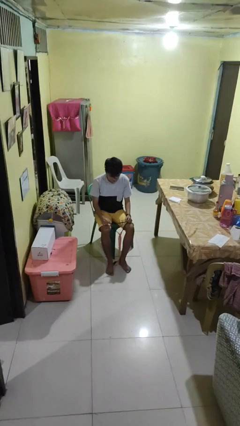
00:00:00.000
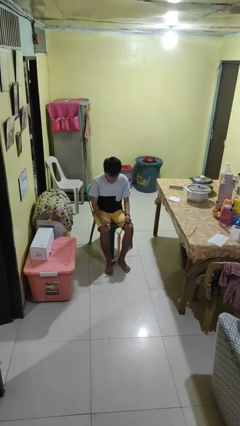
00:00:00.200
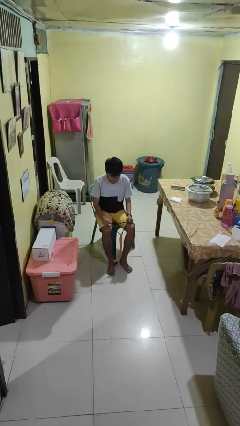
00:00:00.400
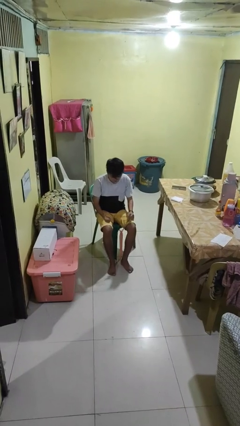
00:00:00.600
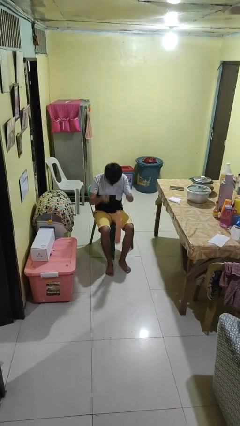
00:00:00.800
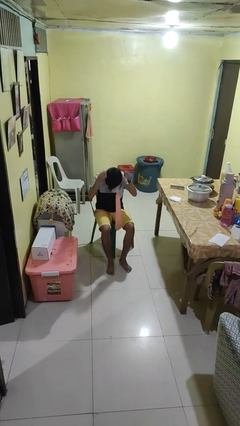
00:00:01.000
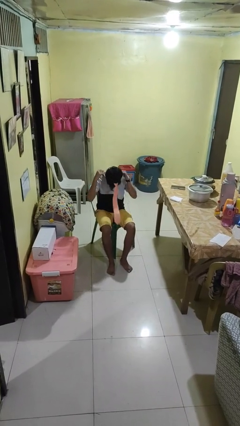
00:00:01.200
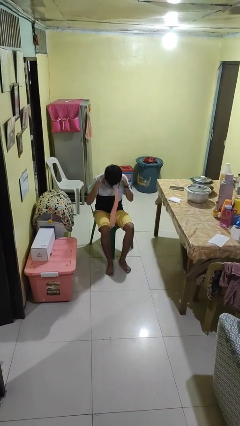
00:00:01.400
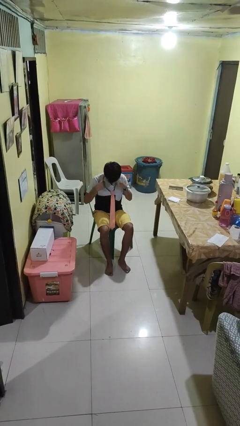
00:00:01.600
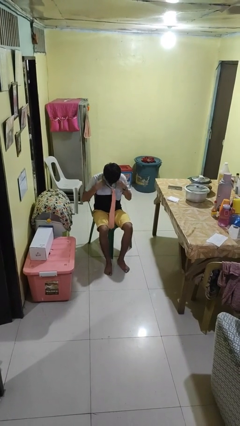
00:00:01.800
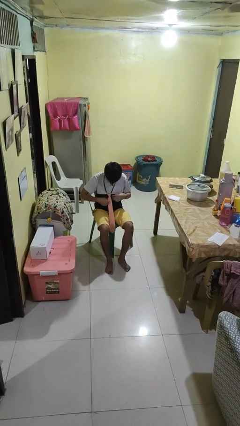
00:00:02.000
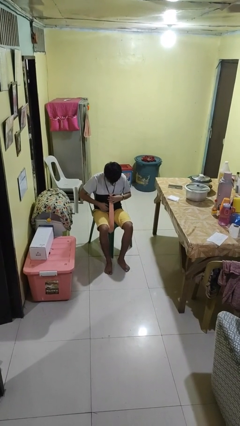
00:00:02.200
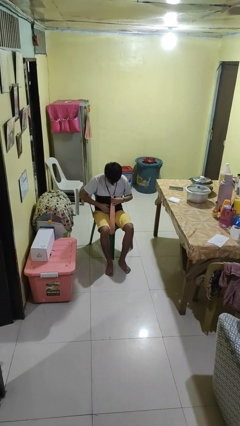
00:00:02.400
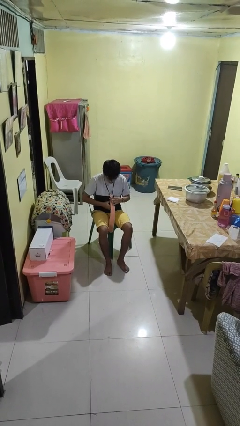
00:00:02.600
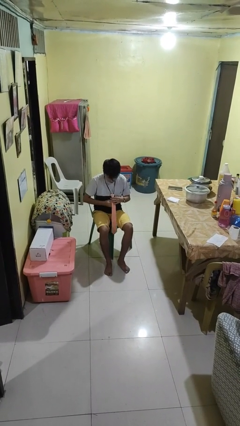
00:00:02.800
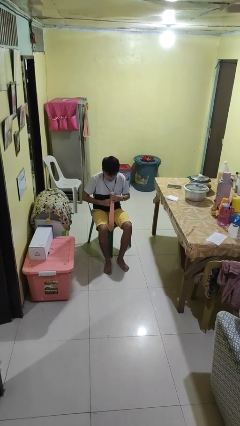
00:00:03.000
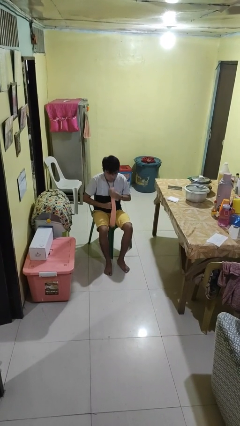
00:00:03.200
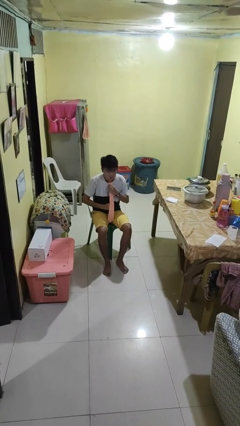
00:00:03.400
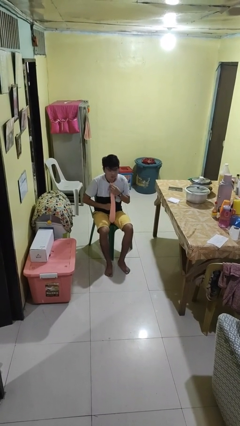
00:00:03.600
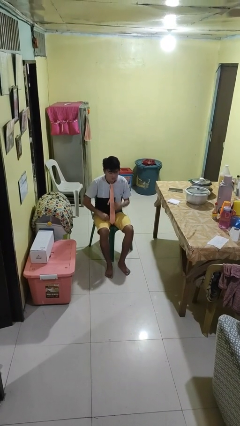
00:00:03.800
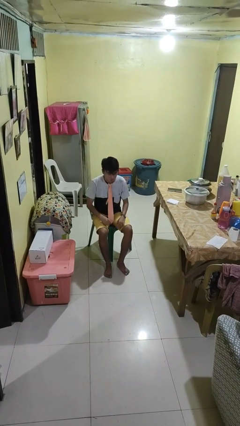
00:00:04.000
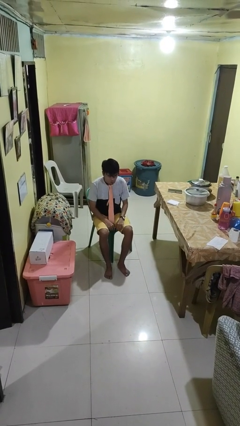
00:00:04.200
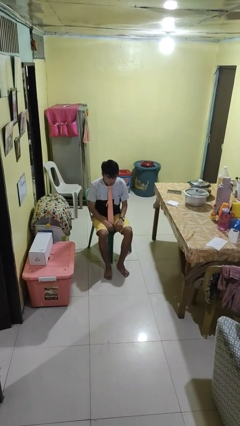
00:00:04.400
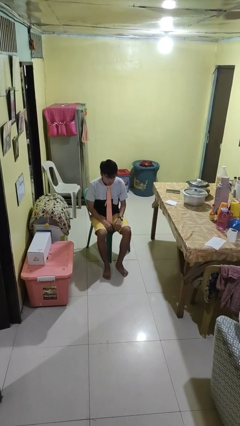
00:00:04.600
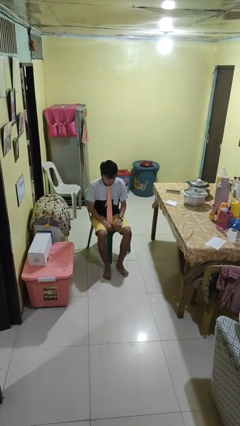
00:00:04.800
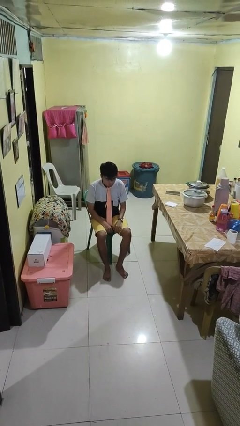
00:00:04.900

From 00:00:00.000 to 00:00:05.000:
person puts on necktie

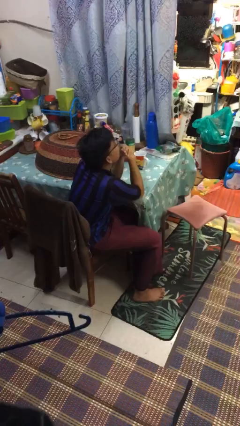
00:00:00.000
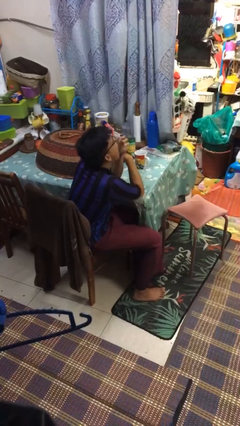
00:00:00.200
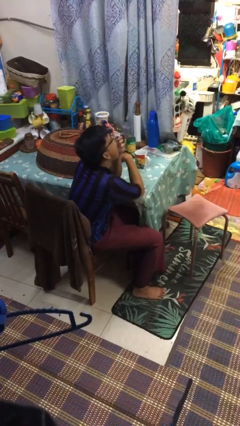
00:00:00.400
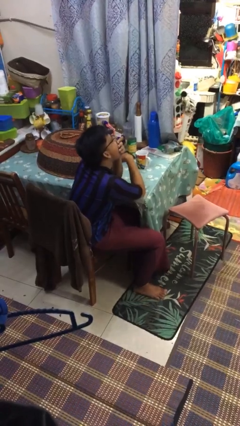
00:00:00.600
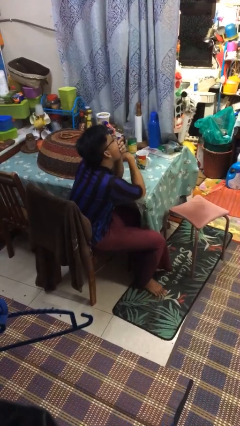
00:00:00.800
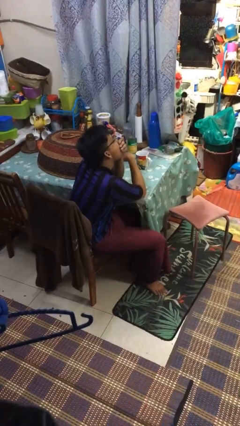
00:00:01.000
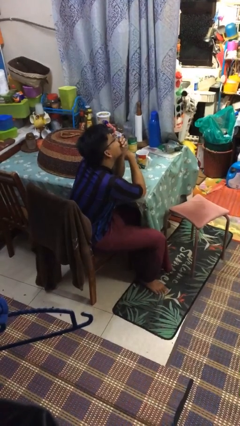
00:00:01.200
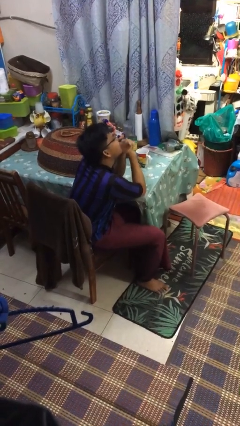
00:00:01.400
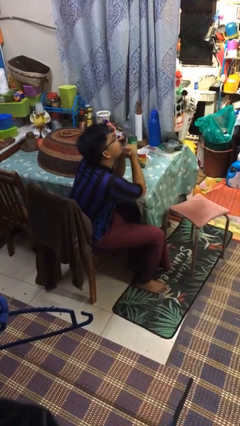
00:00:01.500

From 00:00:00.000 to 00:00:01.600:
person yawns

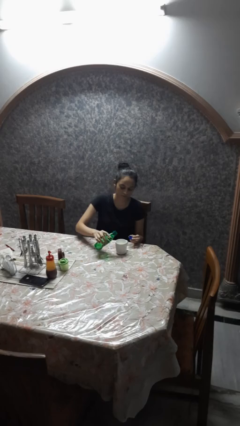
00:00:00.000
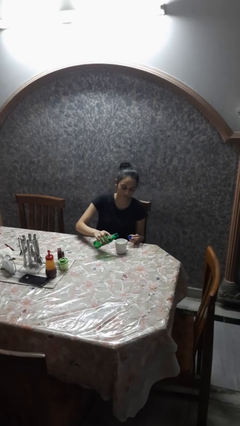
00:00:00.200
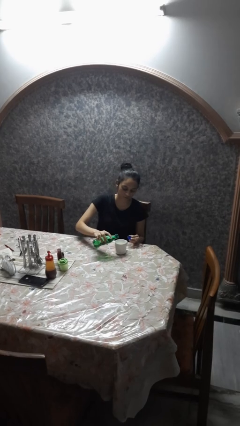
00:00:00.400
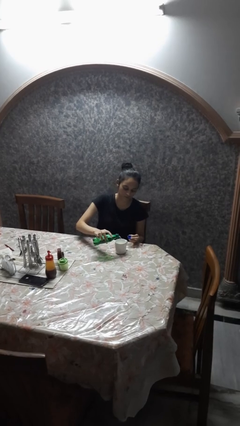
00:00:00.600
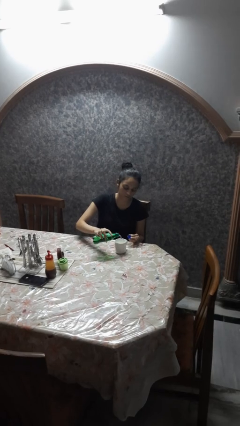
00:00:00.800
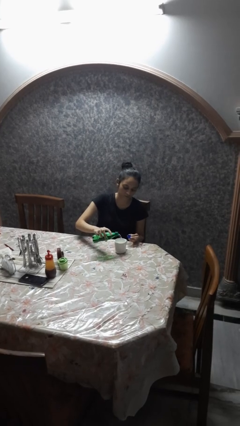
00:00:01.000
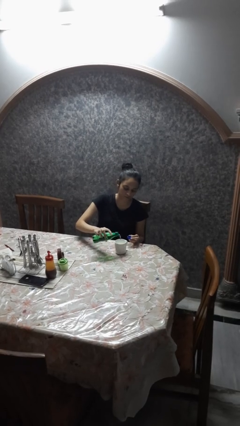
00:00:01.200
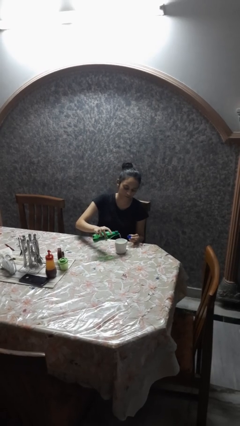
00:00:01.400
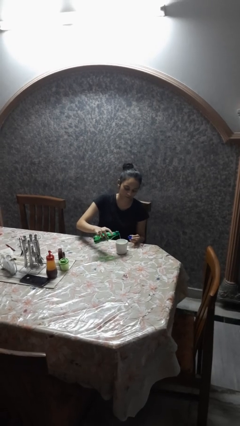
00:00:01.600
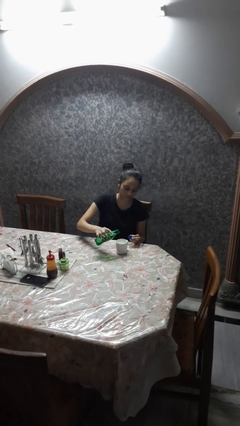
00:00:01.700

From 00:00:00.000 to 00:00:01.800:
person pours liquid into cup

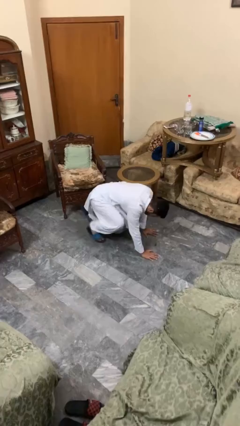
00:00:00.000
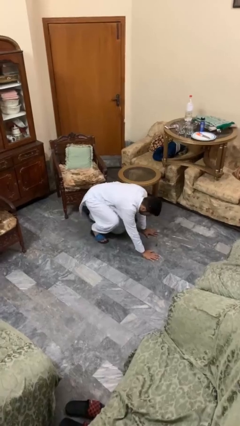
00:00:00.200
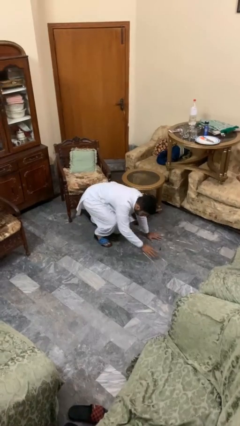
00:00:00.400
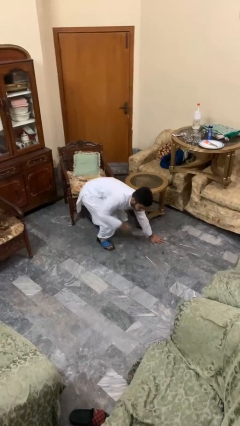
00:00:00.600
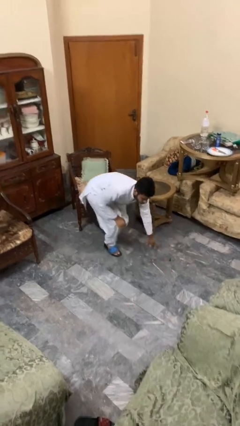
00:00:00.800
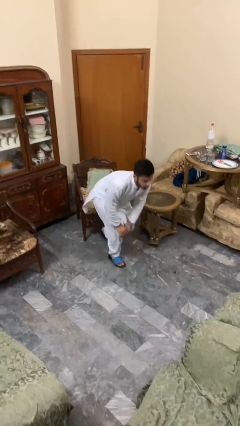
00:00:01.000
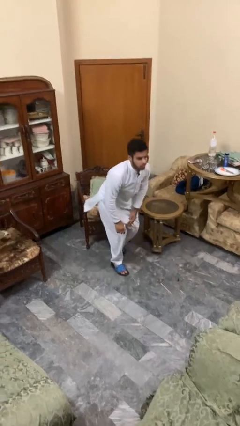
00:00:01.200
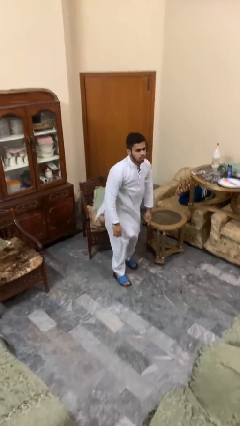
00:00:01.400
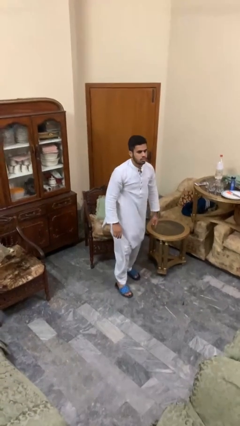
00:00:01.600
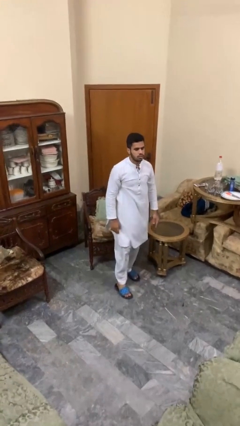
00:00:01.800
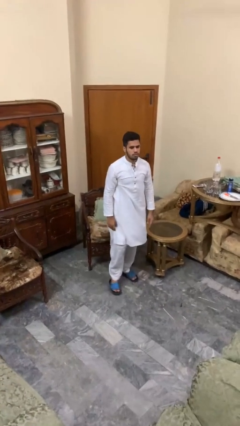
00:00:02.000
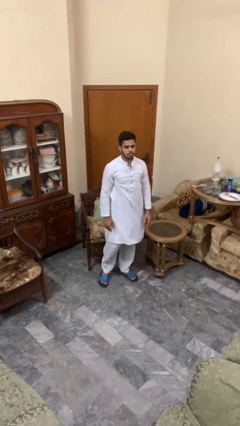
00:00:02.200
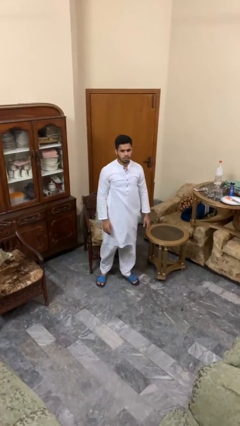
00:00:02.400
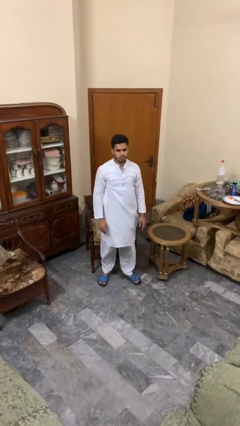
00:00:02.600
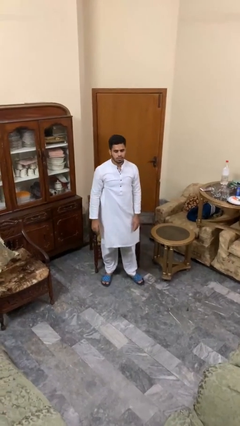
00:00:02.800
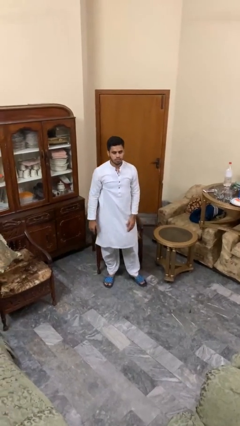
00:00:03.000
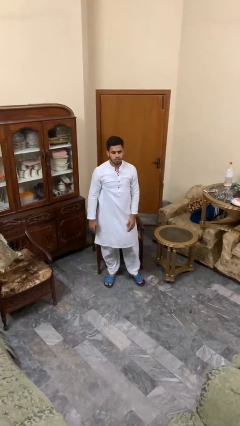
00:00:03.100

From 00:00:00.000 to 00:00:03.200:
person stands up from floor

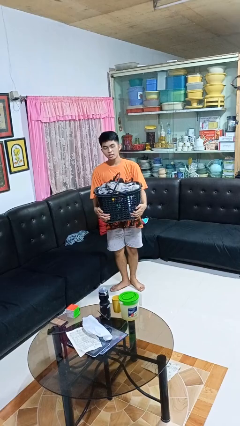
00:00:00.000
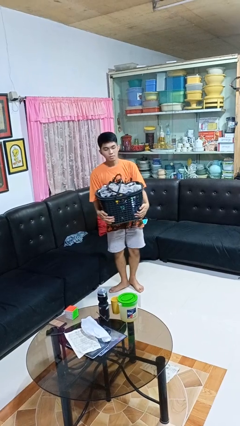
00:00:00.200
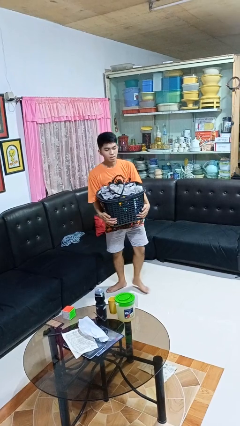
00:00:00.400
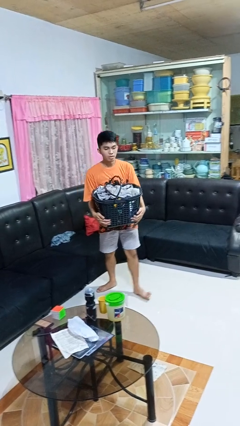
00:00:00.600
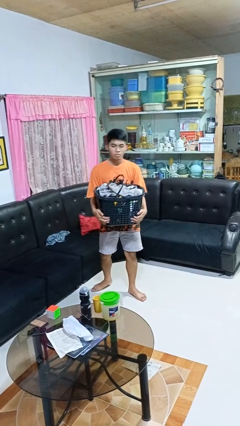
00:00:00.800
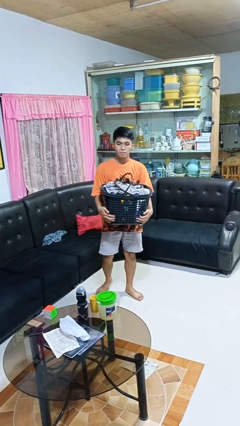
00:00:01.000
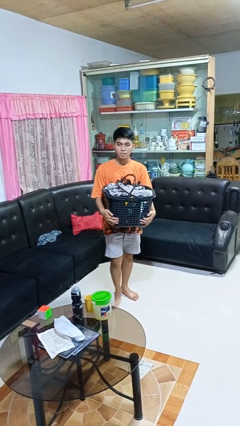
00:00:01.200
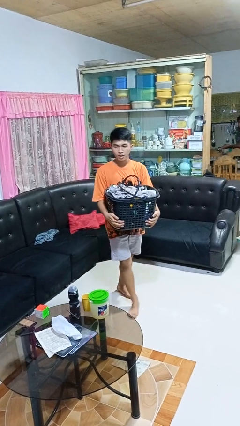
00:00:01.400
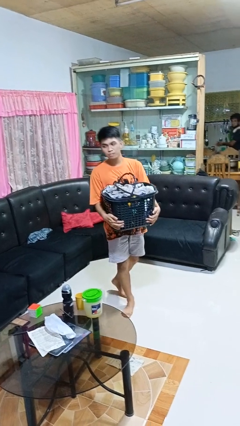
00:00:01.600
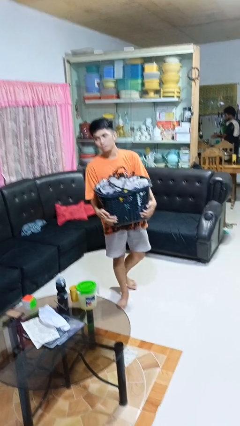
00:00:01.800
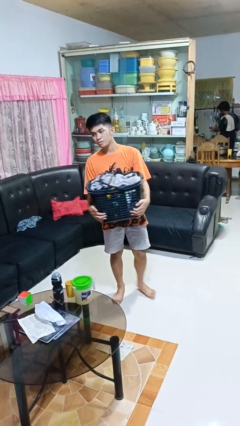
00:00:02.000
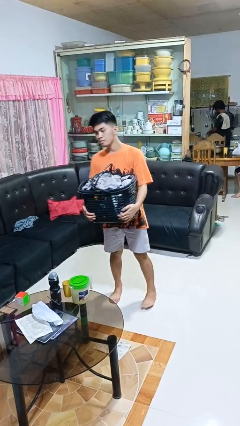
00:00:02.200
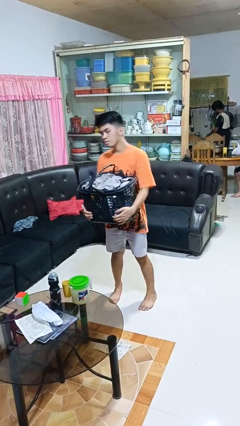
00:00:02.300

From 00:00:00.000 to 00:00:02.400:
person carries laundry basket

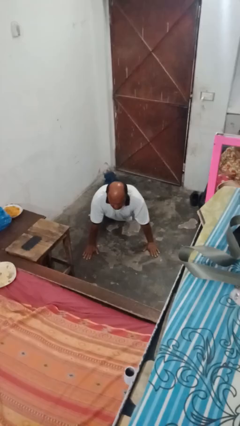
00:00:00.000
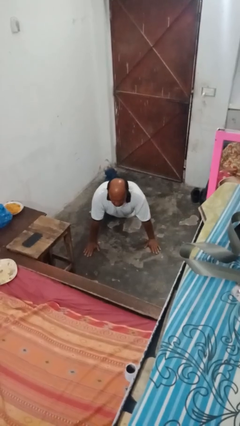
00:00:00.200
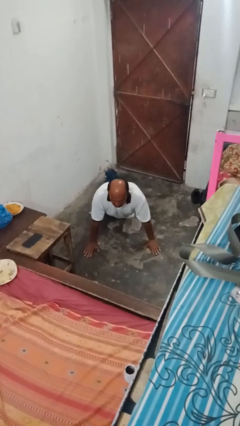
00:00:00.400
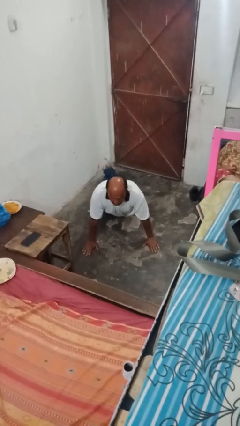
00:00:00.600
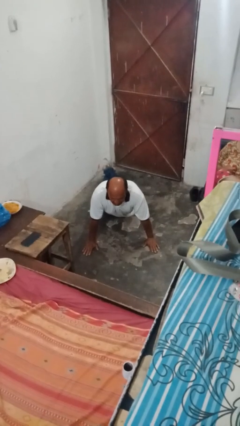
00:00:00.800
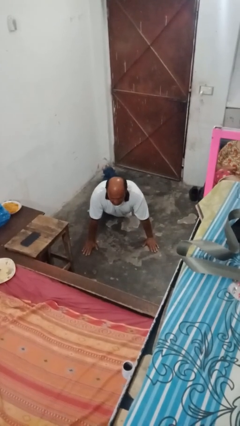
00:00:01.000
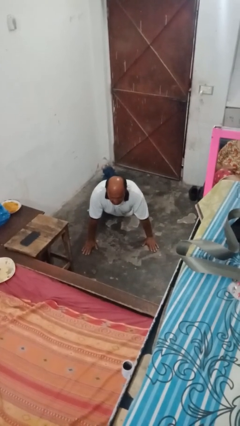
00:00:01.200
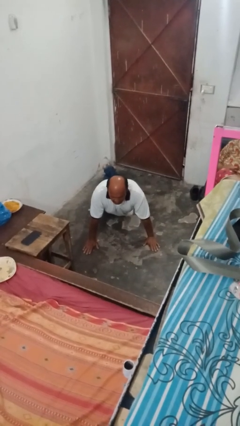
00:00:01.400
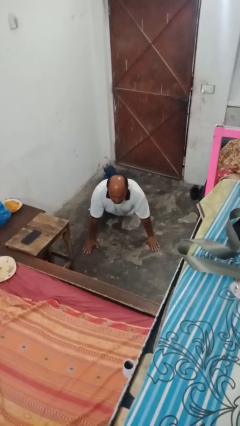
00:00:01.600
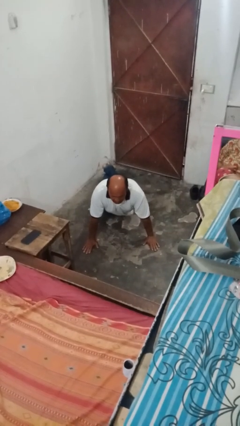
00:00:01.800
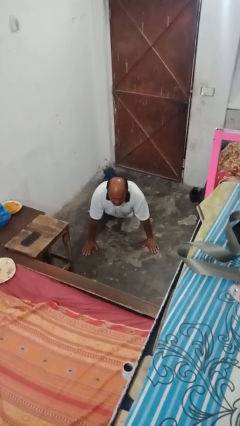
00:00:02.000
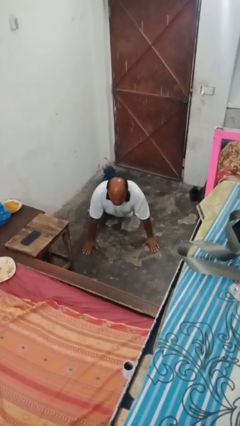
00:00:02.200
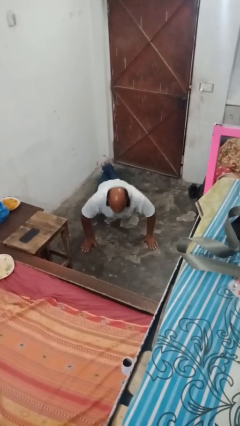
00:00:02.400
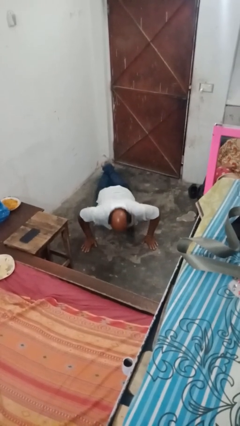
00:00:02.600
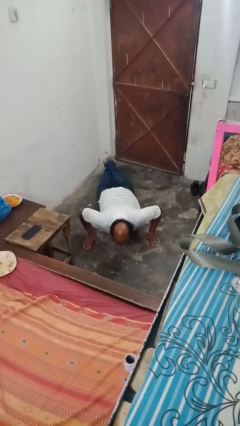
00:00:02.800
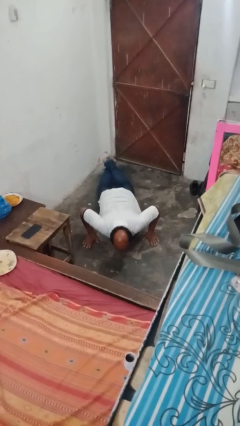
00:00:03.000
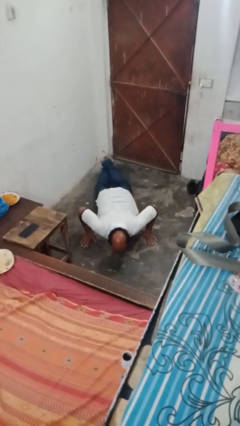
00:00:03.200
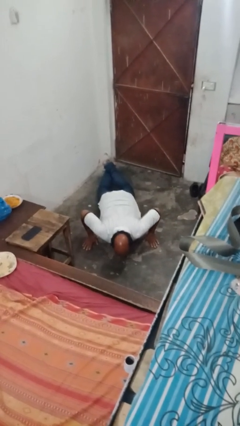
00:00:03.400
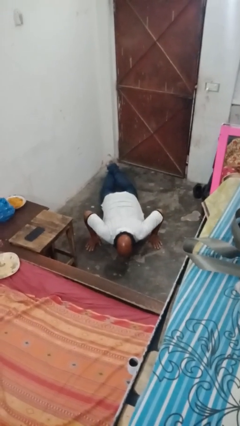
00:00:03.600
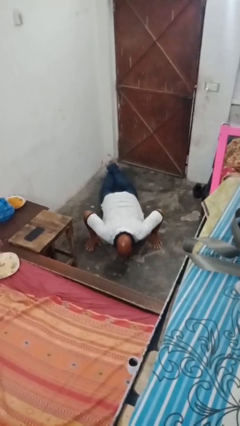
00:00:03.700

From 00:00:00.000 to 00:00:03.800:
person exercises with pushup
